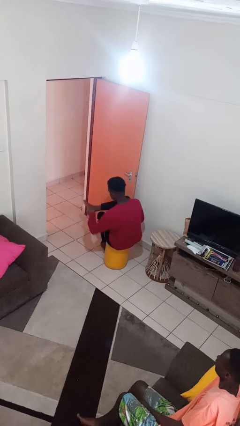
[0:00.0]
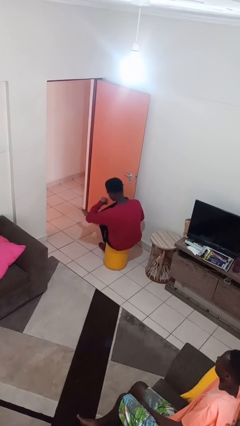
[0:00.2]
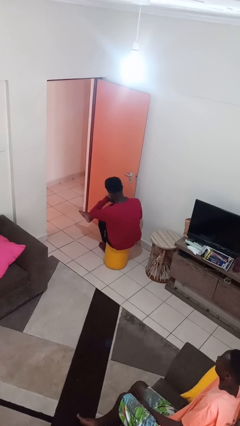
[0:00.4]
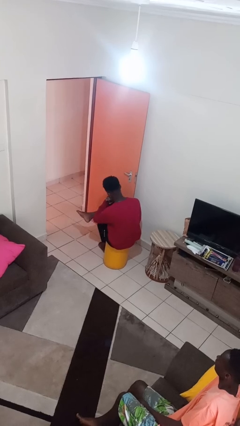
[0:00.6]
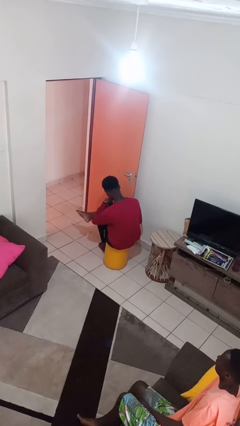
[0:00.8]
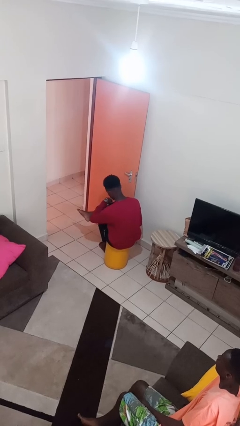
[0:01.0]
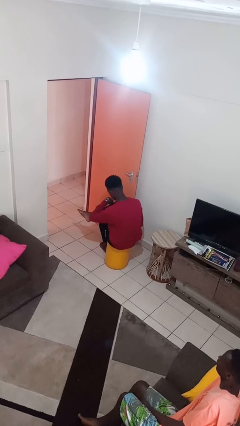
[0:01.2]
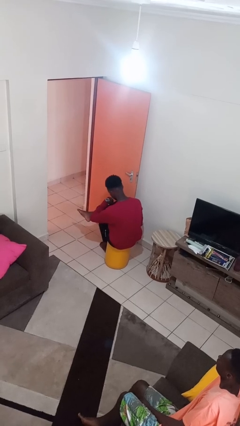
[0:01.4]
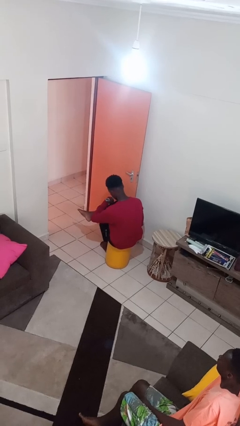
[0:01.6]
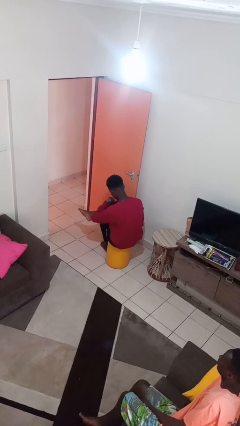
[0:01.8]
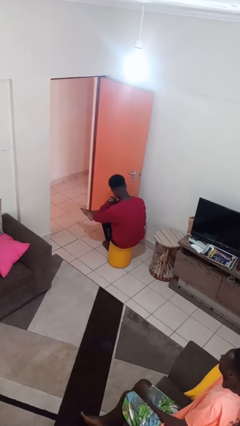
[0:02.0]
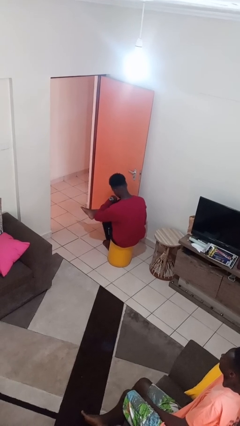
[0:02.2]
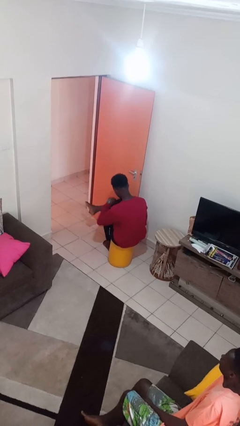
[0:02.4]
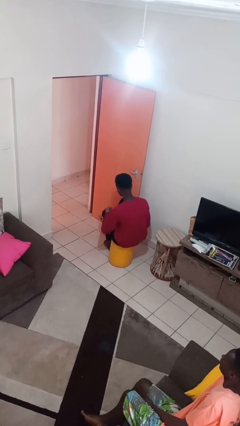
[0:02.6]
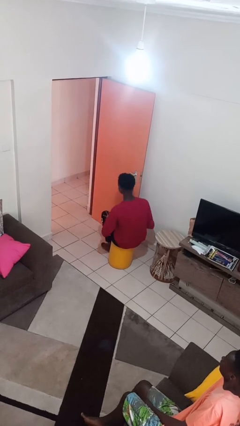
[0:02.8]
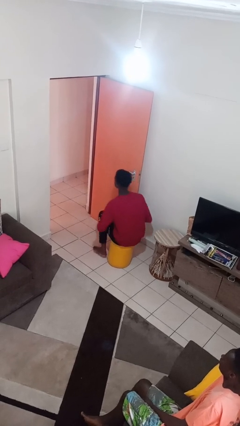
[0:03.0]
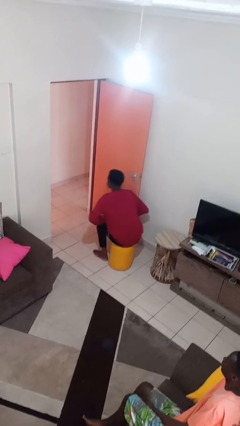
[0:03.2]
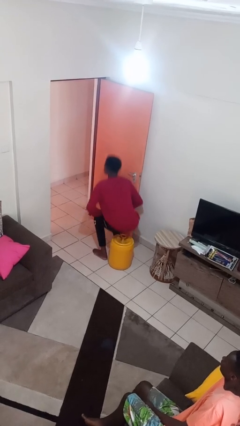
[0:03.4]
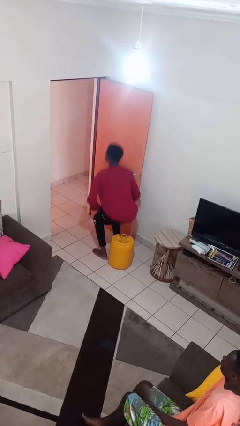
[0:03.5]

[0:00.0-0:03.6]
person looks at wristwatch

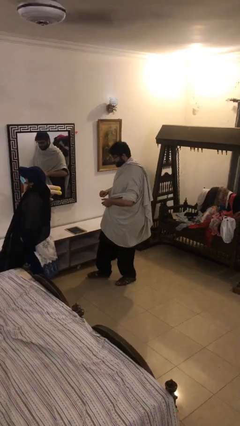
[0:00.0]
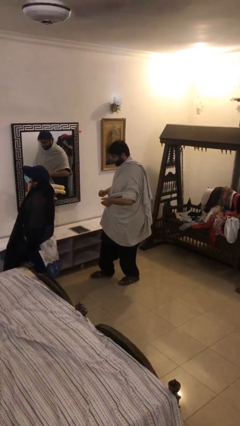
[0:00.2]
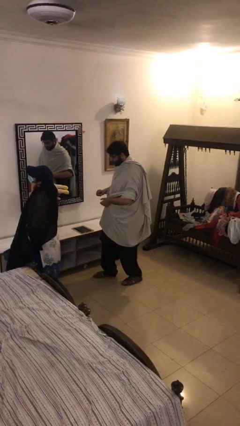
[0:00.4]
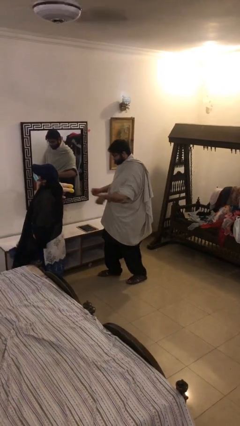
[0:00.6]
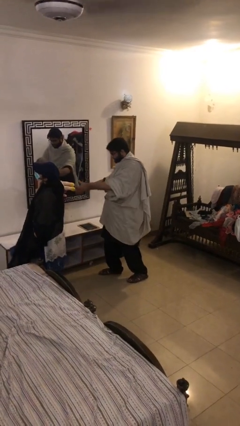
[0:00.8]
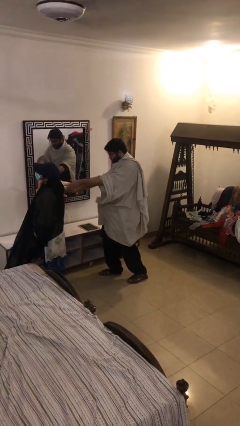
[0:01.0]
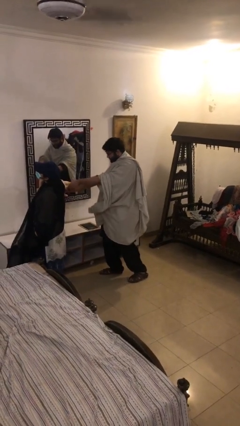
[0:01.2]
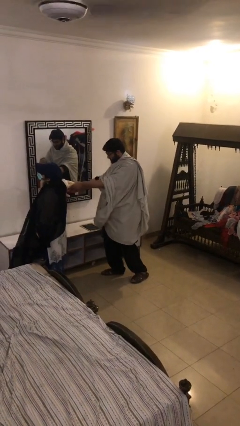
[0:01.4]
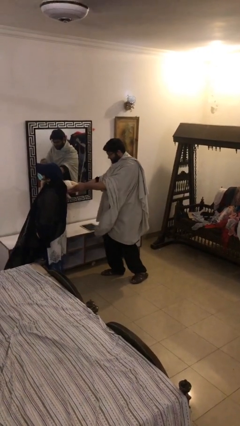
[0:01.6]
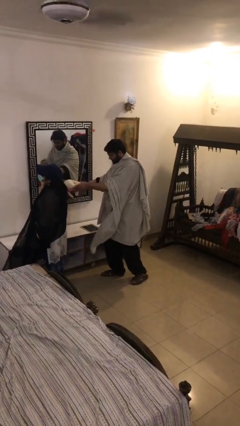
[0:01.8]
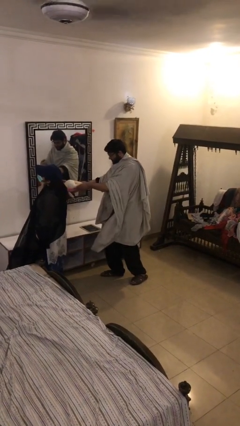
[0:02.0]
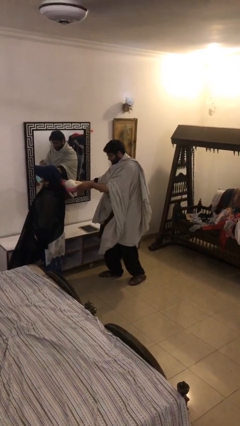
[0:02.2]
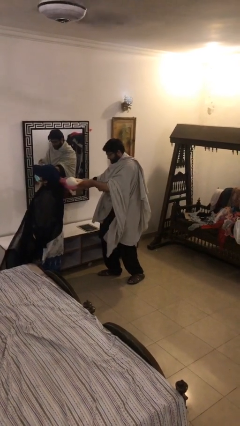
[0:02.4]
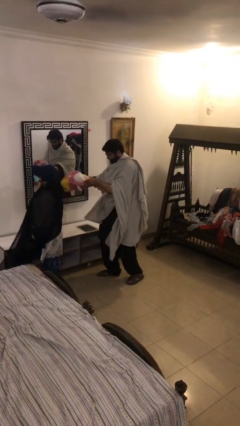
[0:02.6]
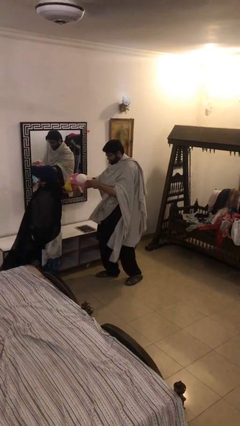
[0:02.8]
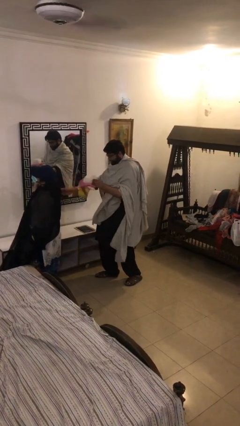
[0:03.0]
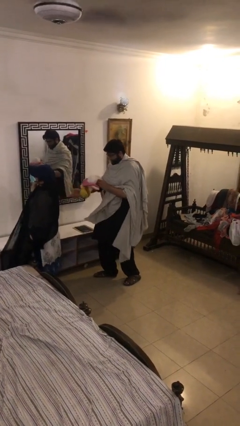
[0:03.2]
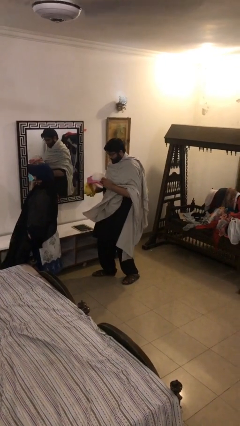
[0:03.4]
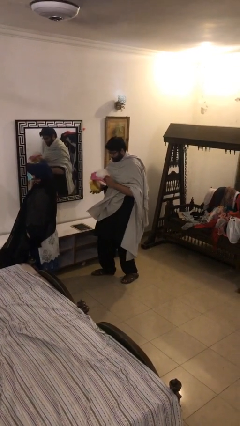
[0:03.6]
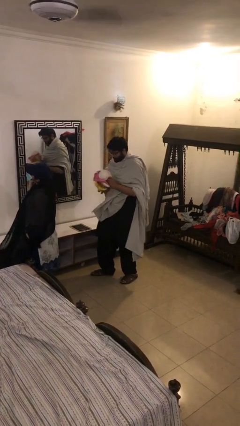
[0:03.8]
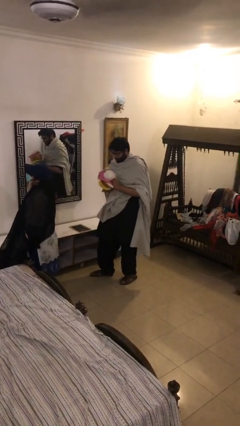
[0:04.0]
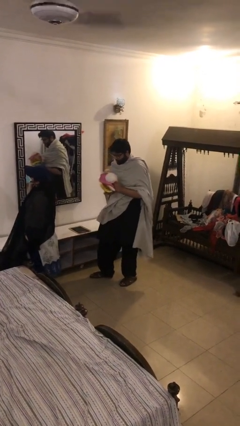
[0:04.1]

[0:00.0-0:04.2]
person steals object from person

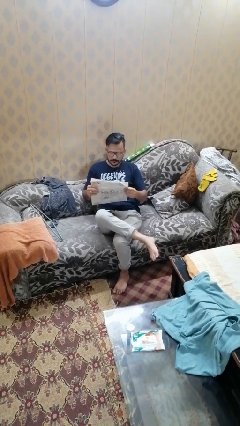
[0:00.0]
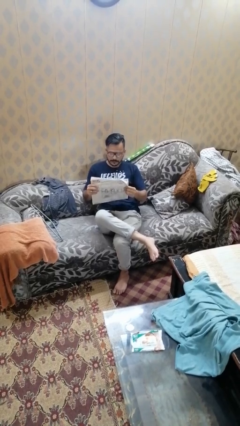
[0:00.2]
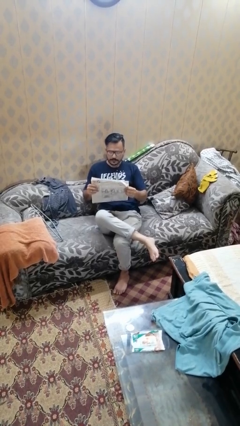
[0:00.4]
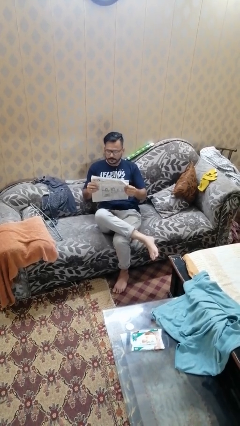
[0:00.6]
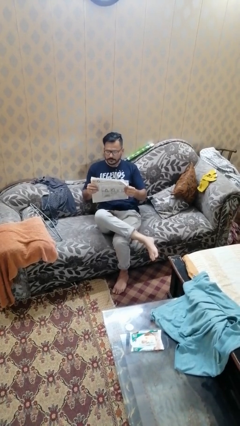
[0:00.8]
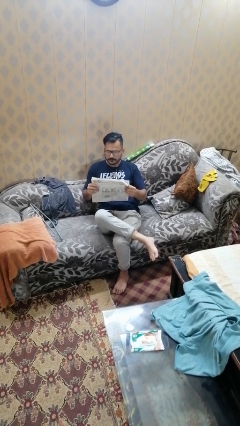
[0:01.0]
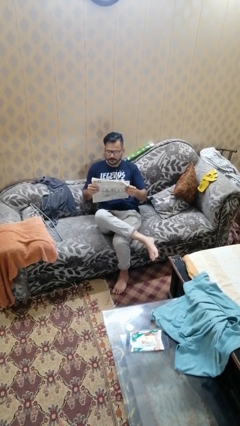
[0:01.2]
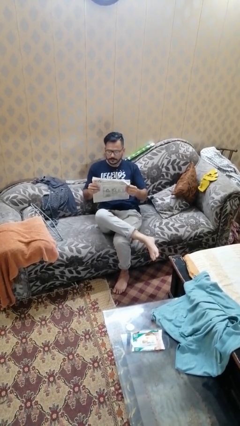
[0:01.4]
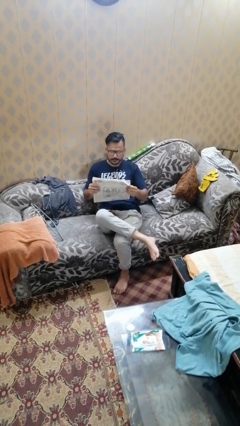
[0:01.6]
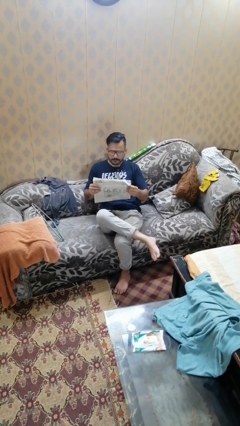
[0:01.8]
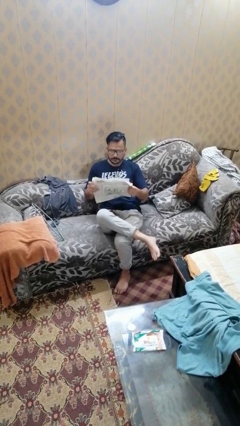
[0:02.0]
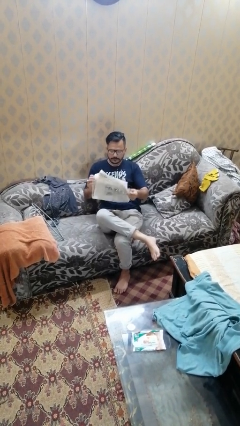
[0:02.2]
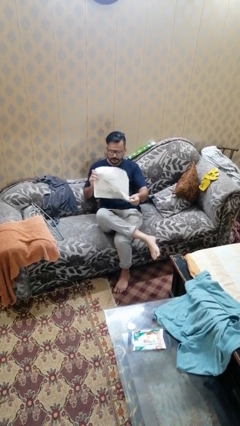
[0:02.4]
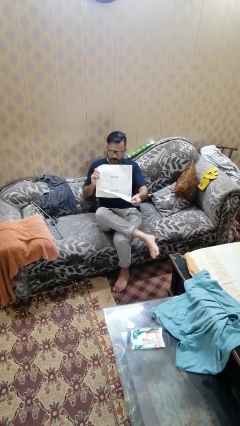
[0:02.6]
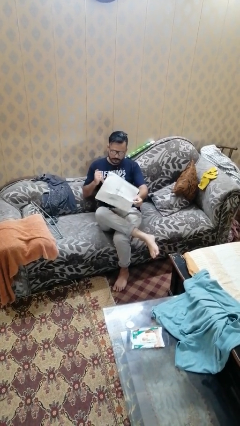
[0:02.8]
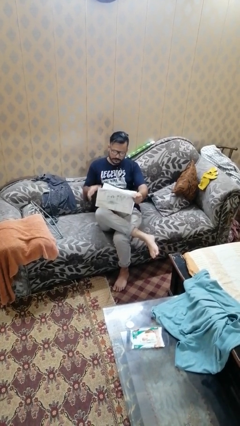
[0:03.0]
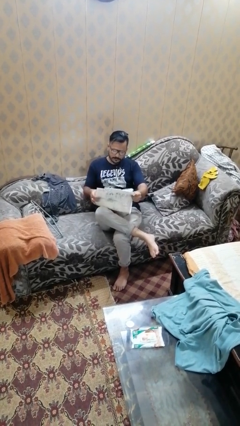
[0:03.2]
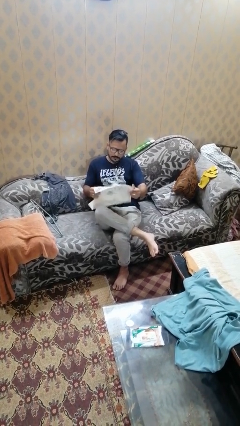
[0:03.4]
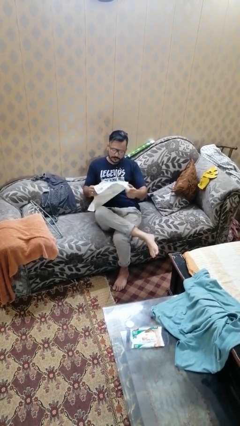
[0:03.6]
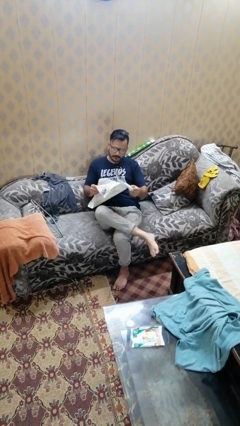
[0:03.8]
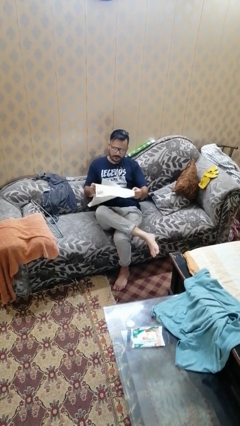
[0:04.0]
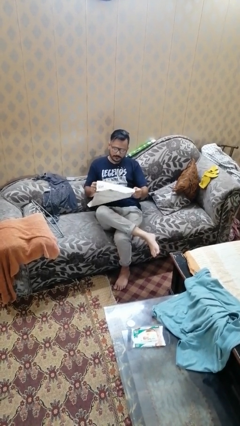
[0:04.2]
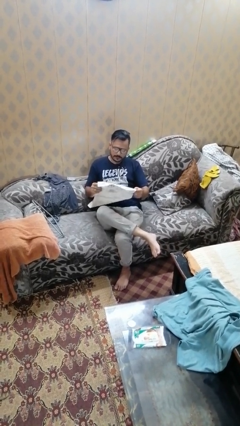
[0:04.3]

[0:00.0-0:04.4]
person reads newspaper

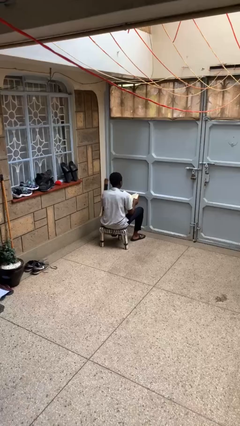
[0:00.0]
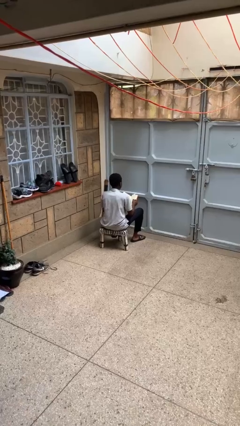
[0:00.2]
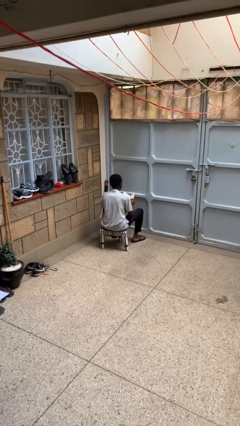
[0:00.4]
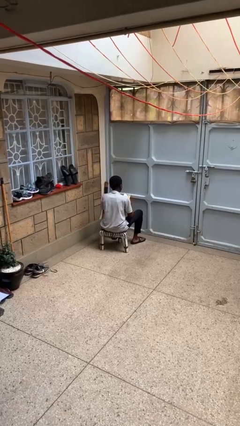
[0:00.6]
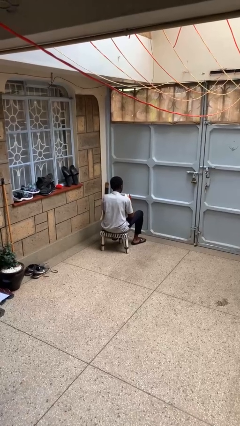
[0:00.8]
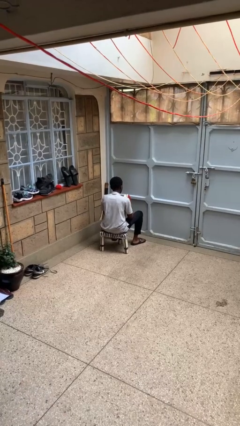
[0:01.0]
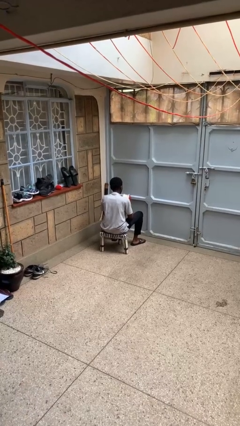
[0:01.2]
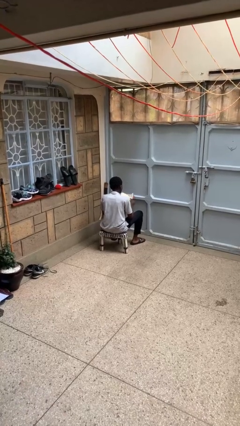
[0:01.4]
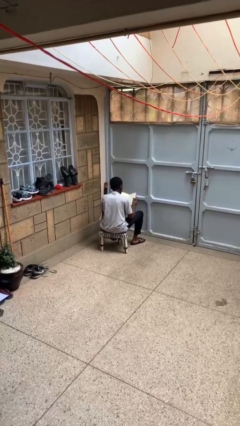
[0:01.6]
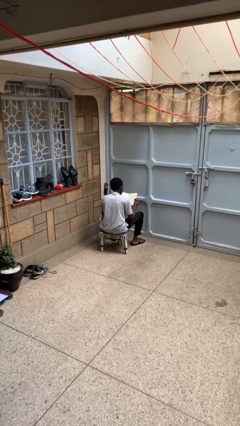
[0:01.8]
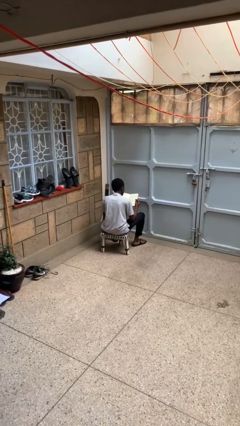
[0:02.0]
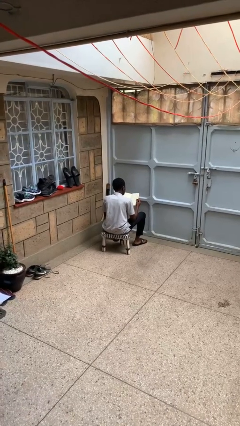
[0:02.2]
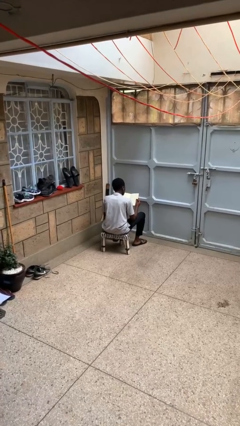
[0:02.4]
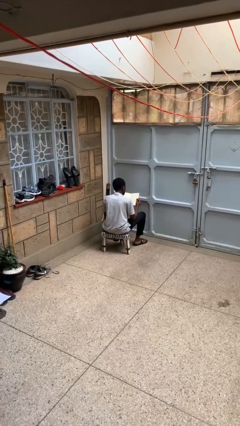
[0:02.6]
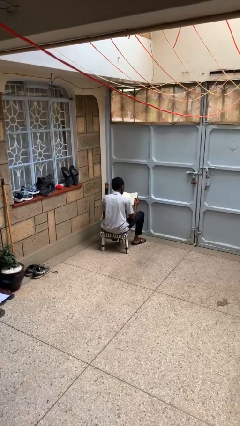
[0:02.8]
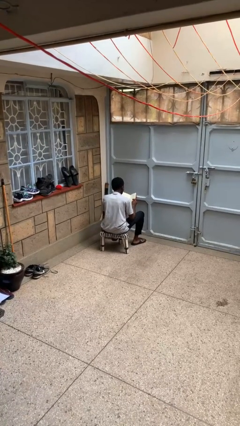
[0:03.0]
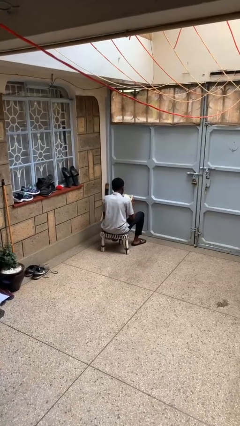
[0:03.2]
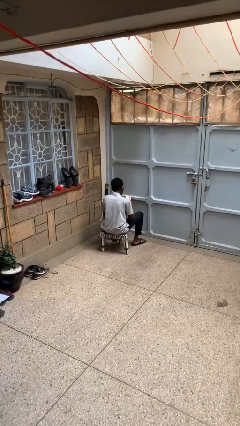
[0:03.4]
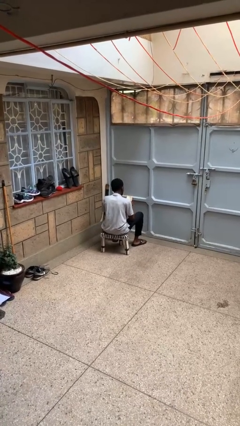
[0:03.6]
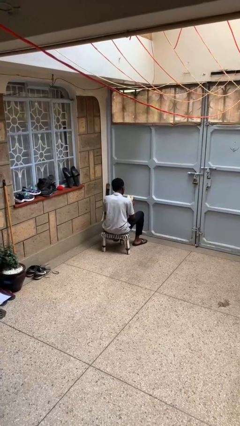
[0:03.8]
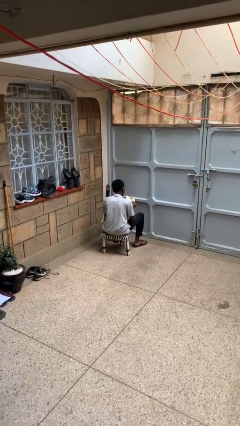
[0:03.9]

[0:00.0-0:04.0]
person reads book

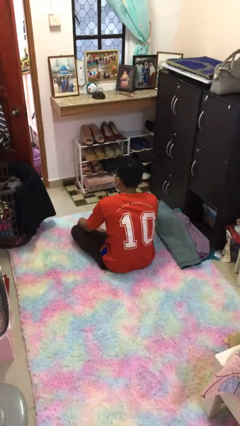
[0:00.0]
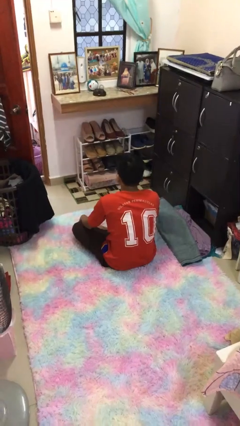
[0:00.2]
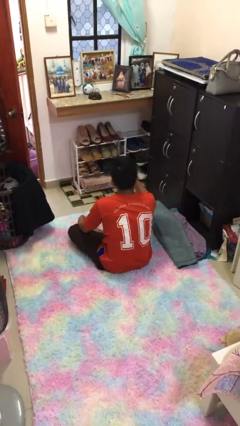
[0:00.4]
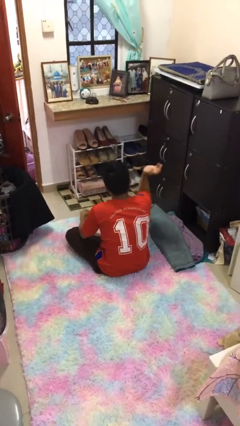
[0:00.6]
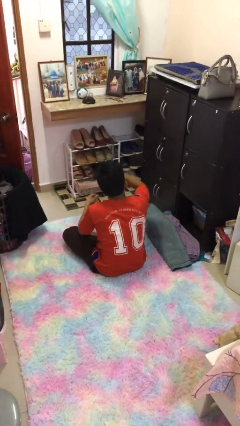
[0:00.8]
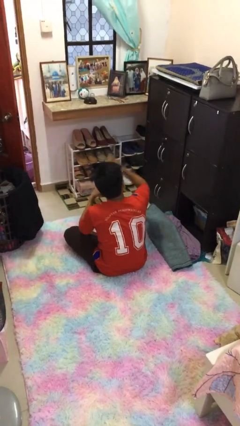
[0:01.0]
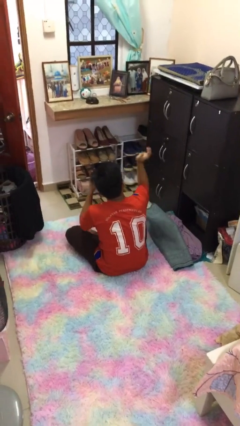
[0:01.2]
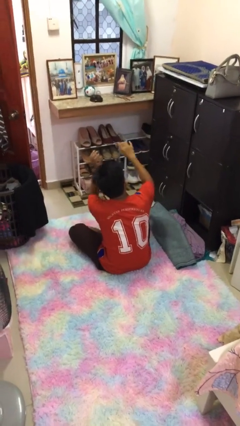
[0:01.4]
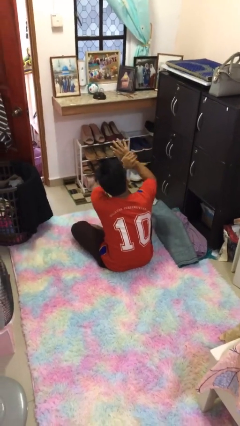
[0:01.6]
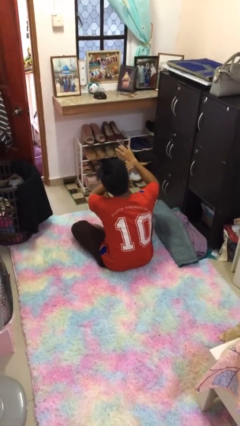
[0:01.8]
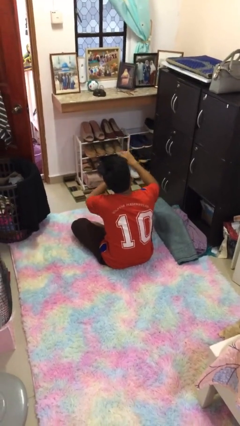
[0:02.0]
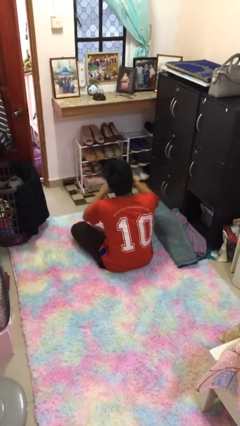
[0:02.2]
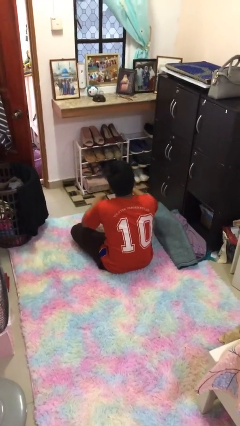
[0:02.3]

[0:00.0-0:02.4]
person swats bug
